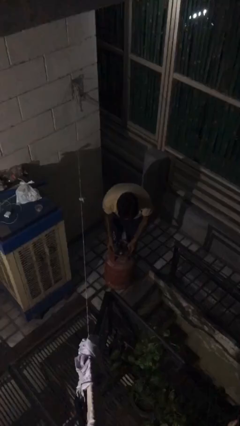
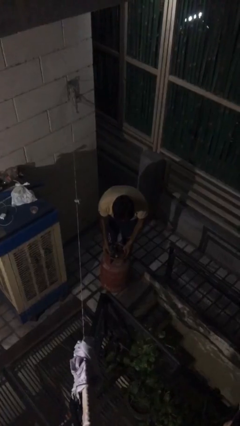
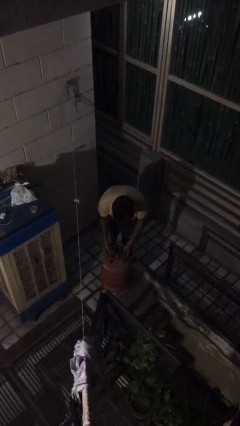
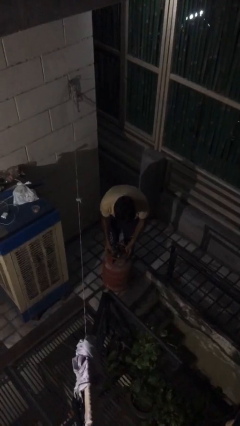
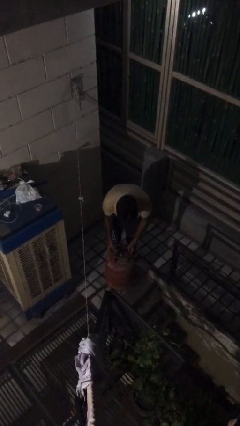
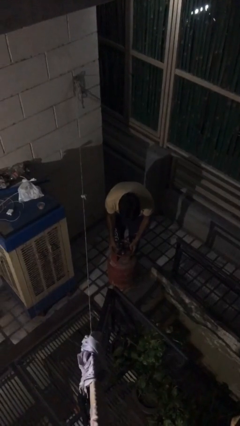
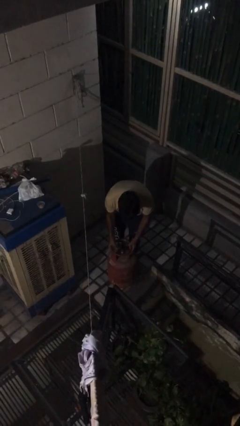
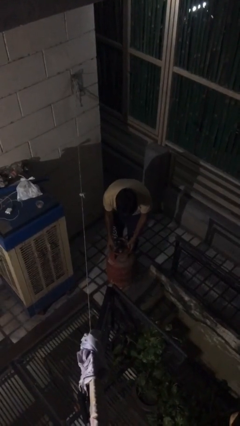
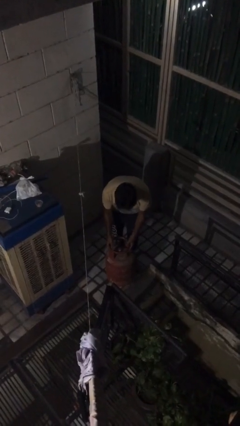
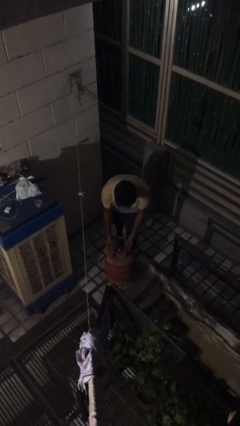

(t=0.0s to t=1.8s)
person puts down object on floor

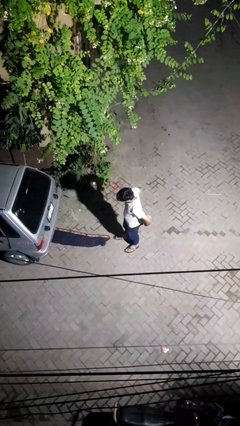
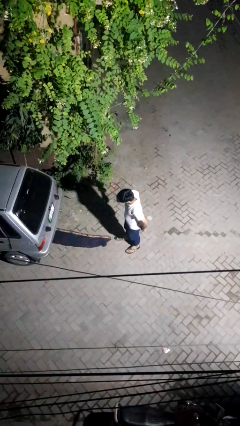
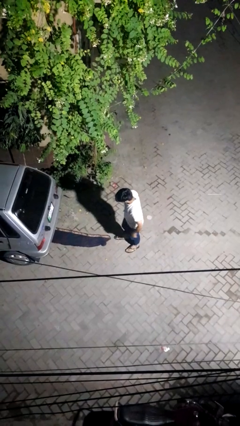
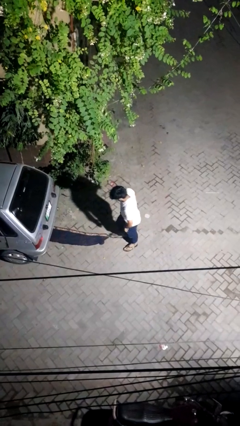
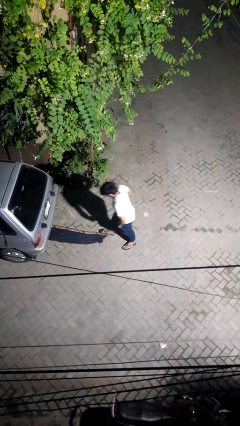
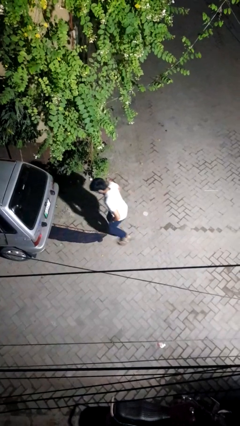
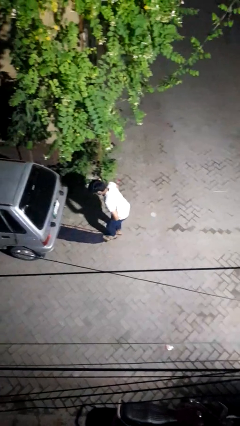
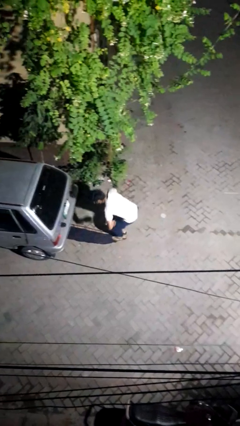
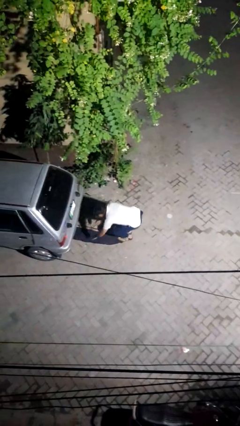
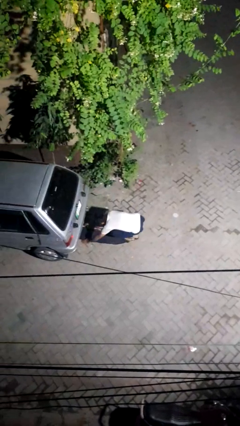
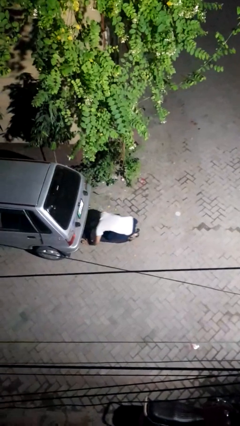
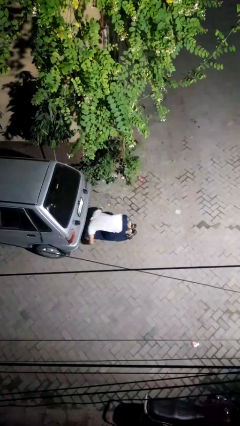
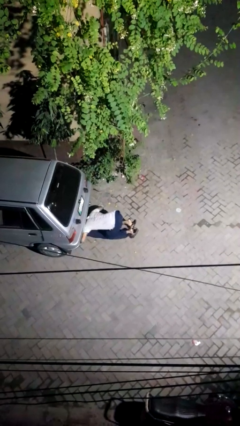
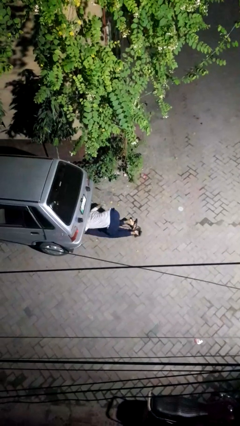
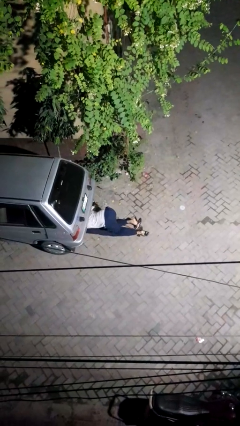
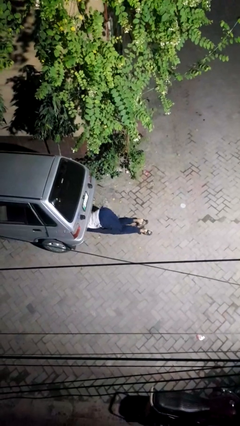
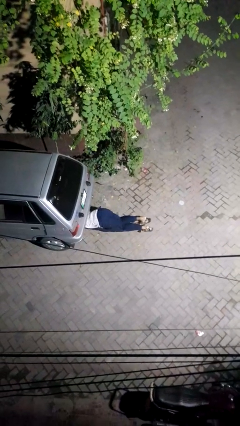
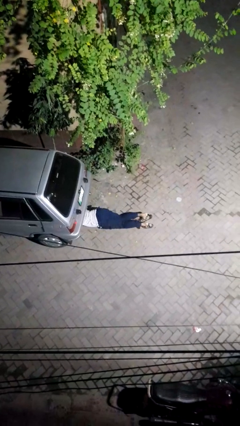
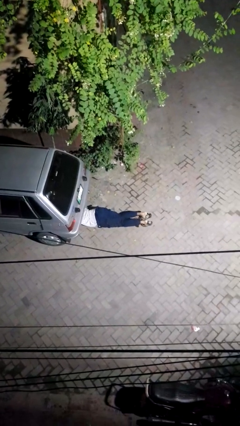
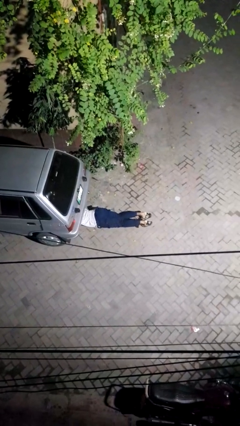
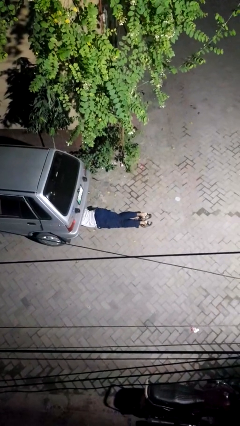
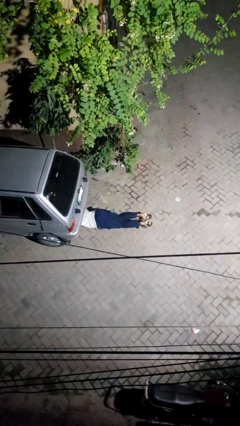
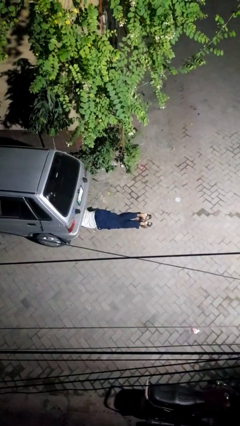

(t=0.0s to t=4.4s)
person crawls out from under vehicle

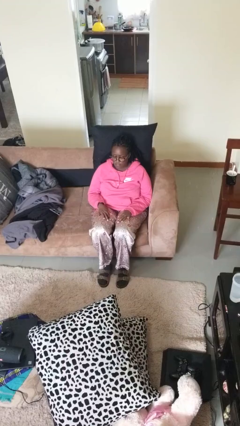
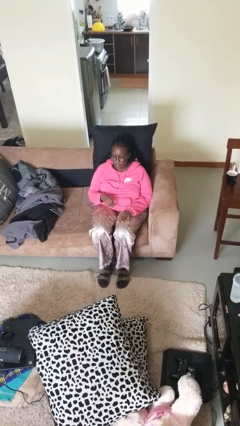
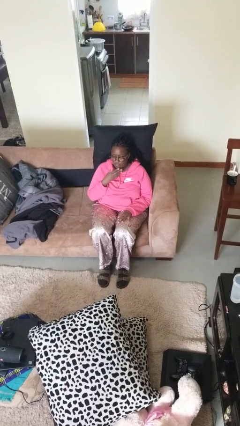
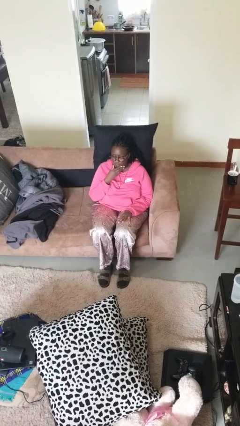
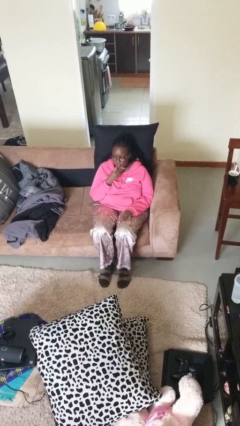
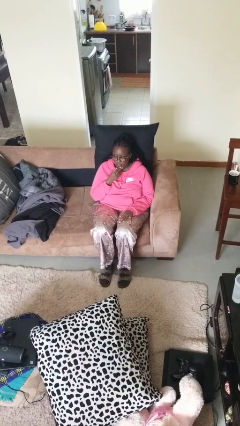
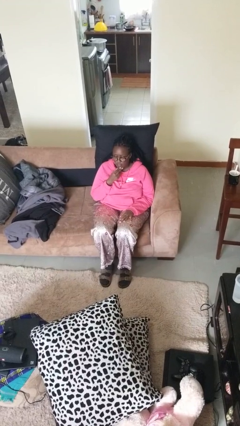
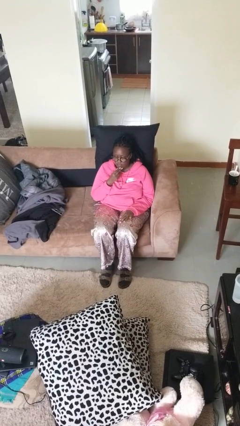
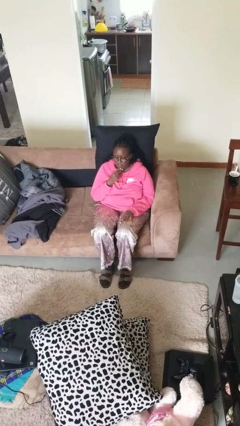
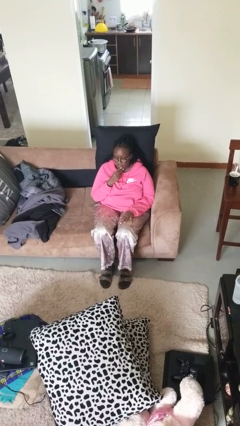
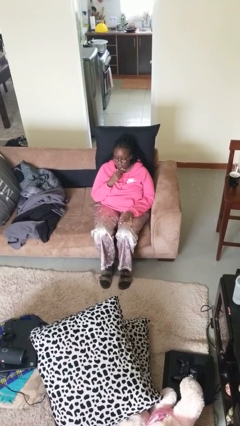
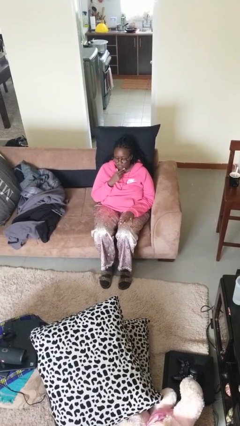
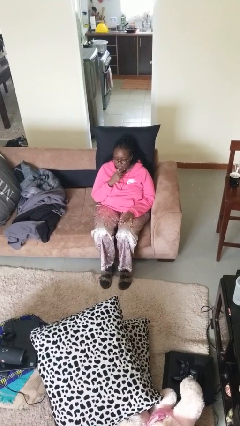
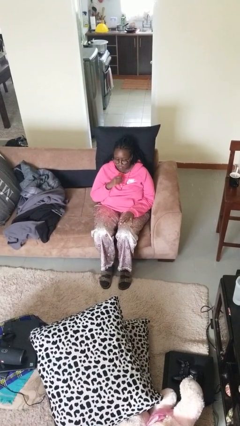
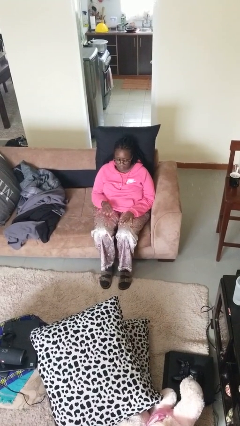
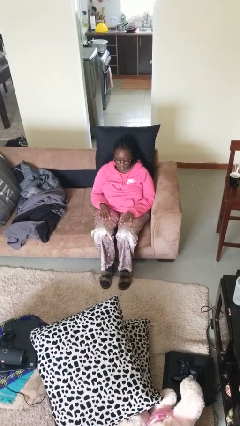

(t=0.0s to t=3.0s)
person strokes chin

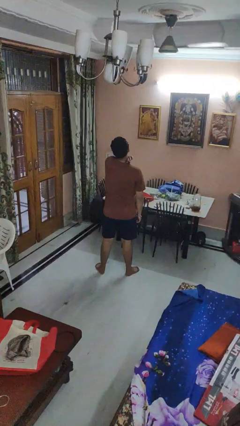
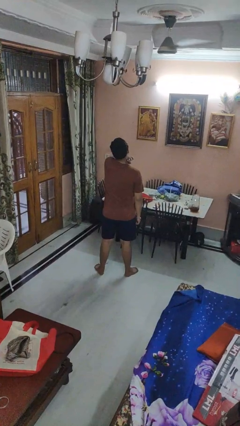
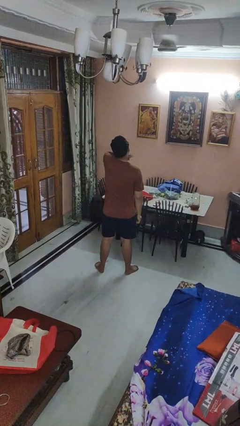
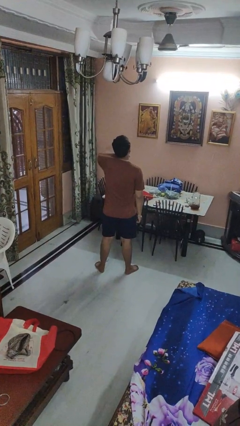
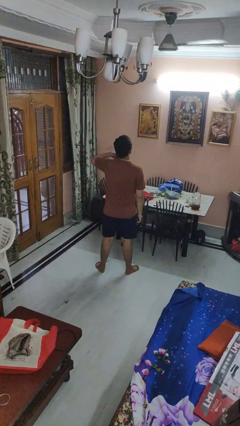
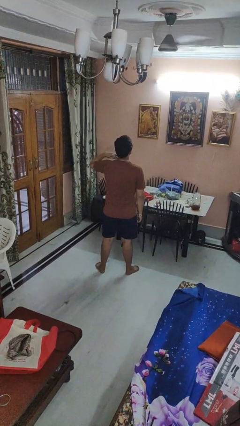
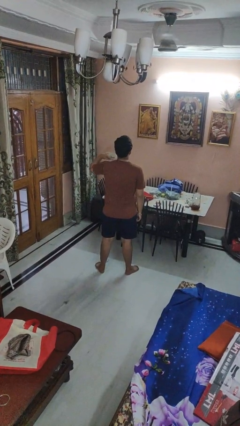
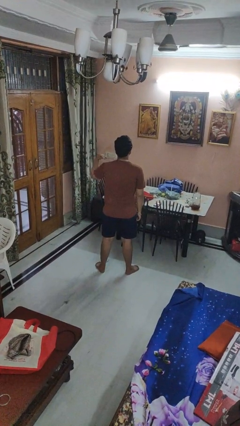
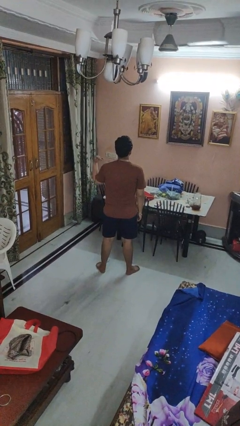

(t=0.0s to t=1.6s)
person gestures cut

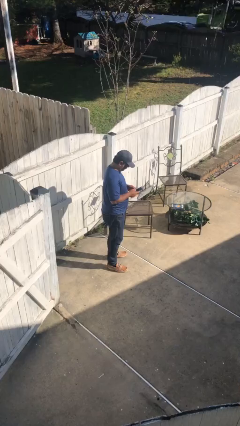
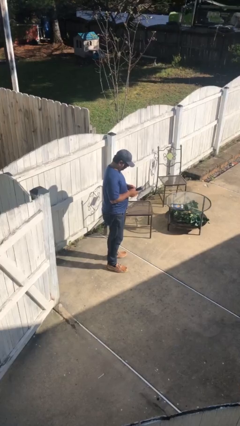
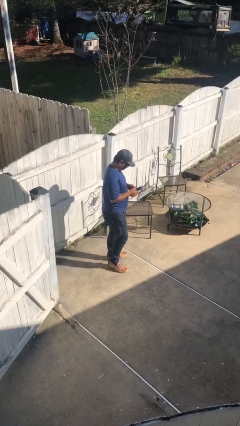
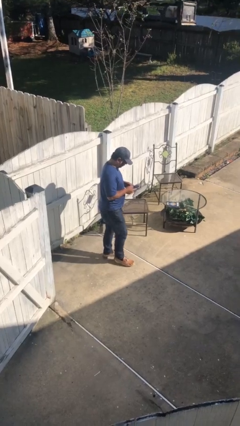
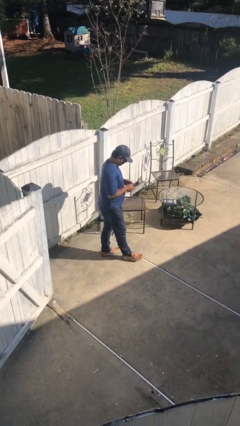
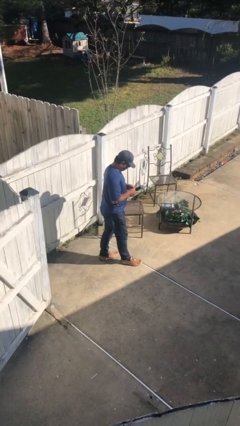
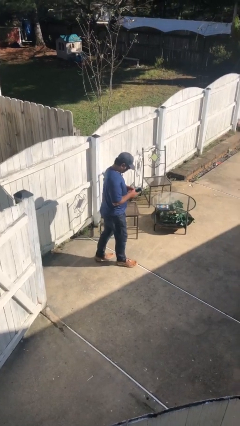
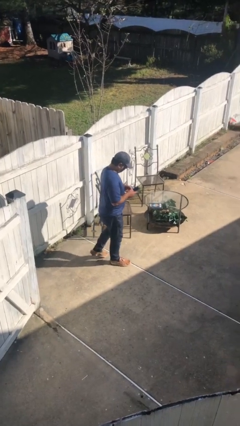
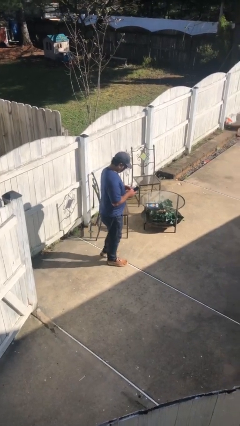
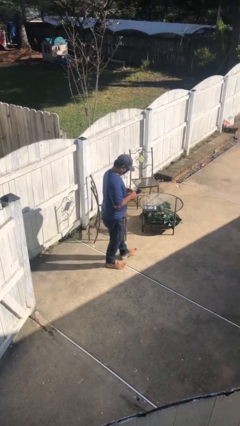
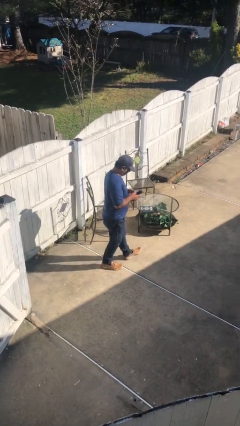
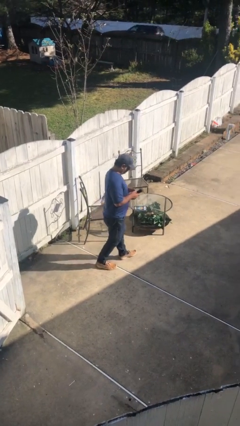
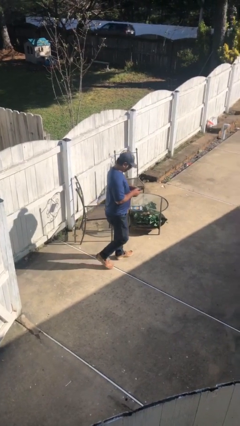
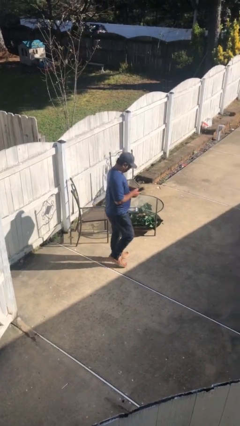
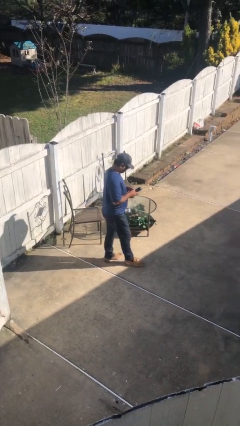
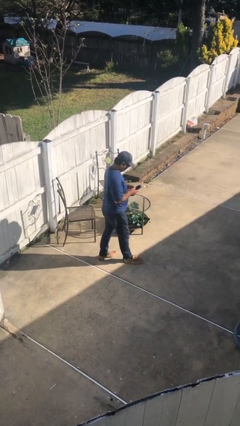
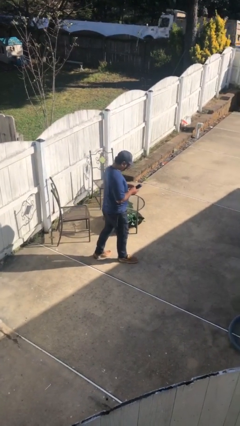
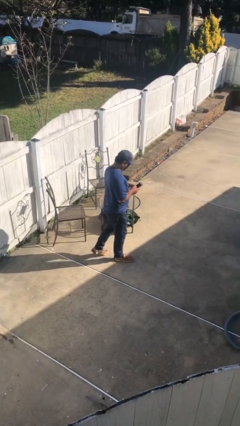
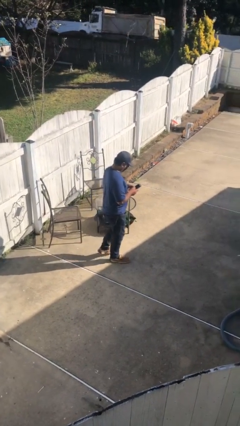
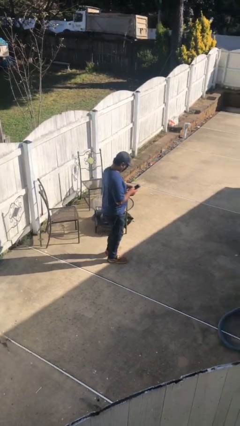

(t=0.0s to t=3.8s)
person texts on phone

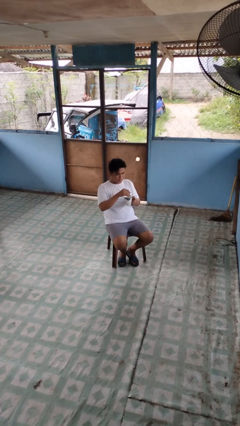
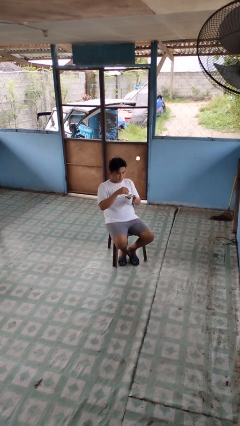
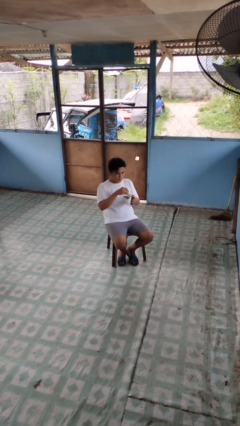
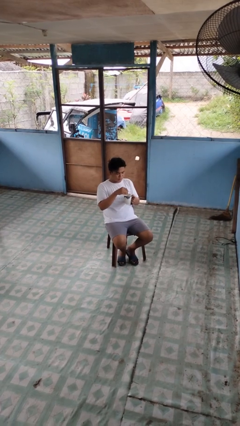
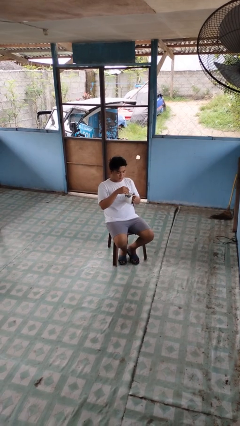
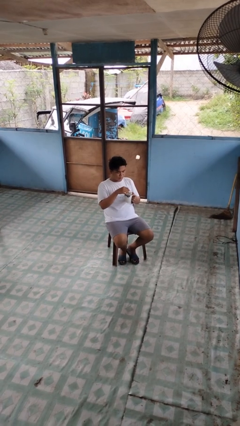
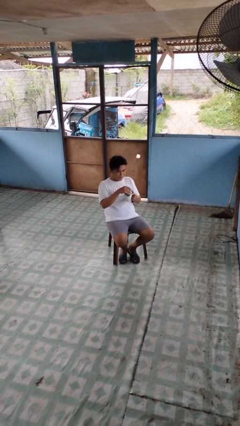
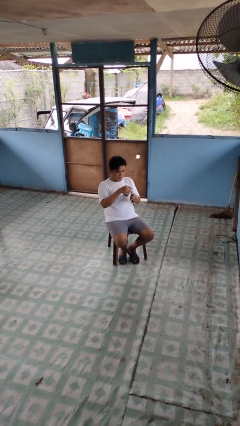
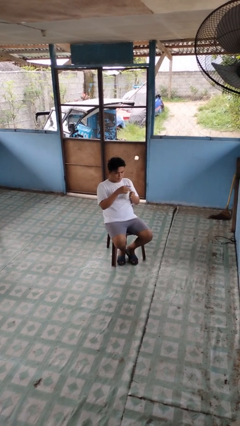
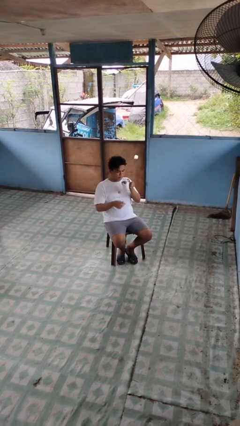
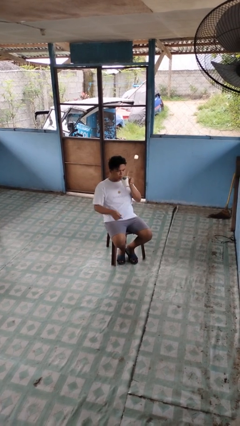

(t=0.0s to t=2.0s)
person stirs mug

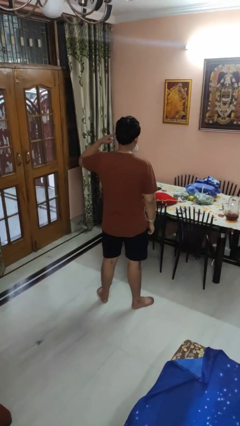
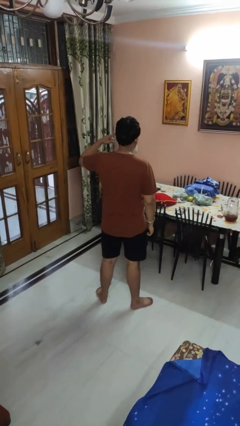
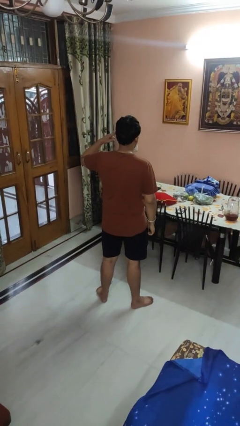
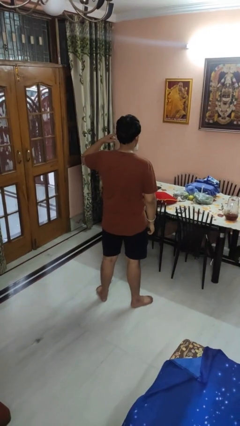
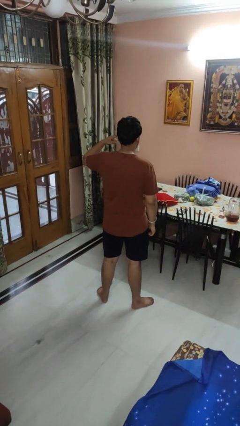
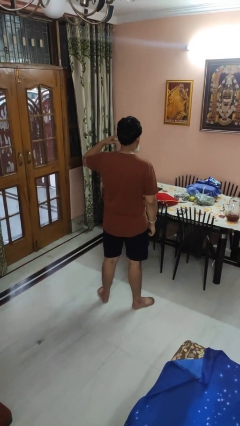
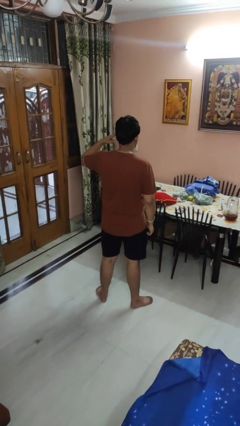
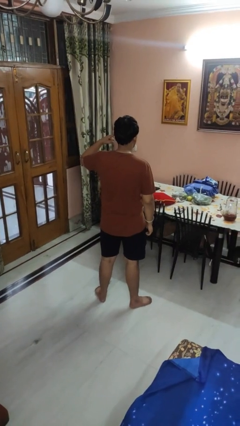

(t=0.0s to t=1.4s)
person gestures listen closely
